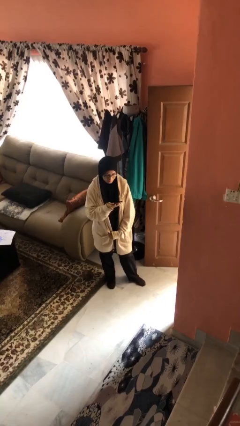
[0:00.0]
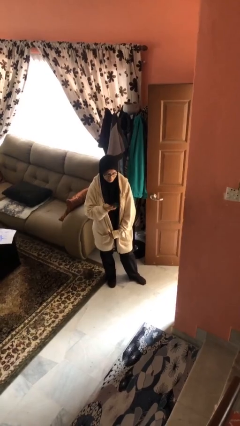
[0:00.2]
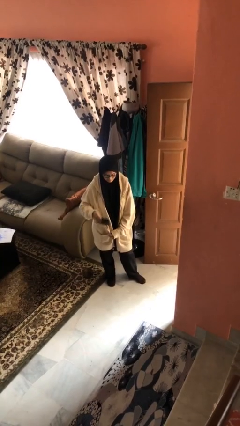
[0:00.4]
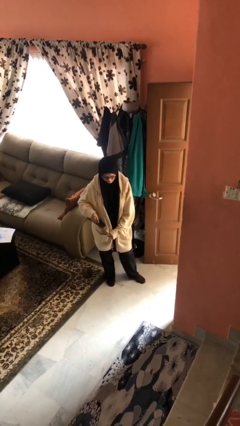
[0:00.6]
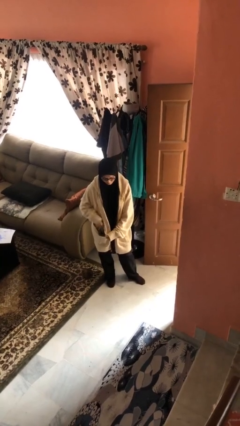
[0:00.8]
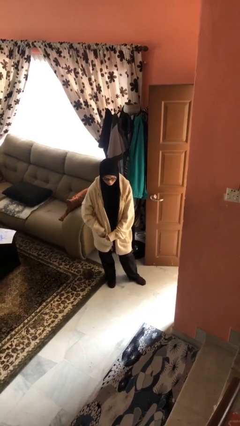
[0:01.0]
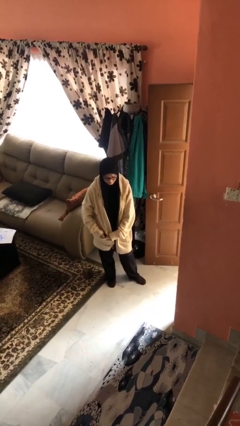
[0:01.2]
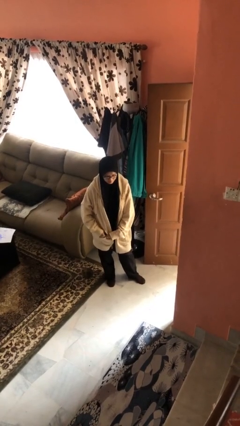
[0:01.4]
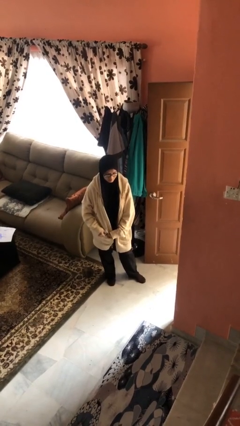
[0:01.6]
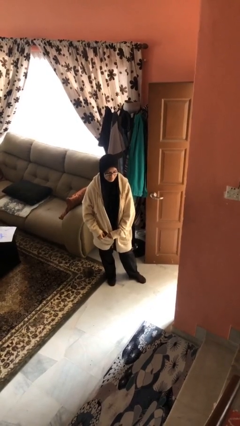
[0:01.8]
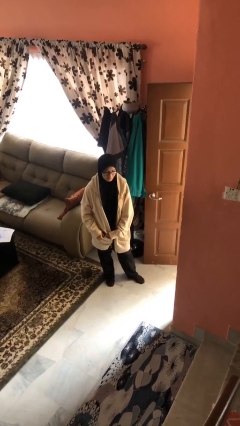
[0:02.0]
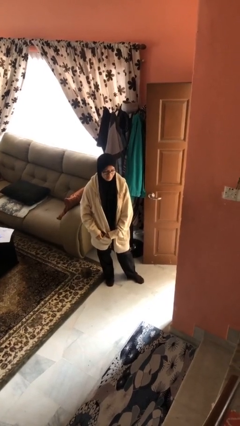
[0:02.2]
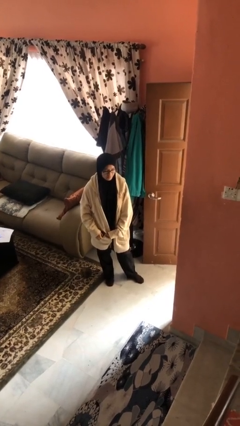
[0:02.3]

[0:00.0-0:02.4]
person puts phone into pocket

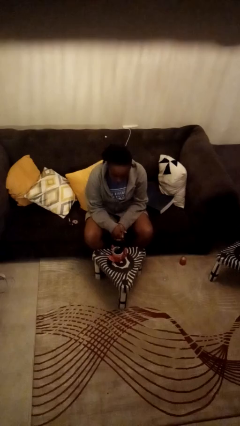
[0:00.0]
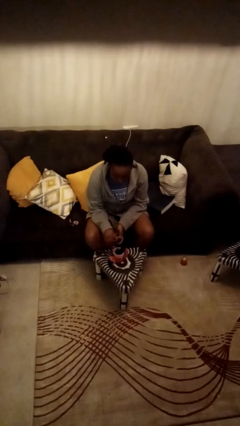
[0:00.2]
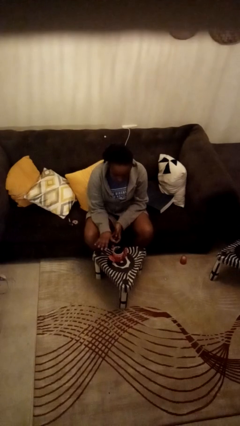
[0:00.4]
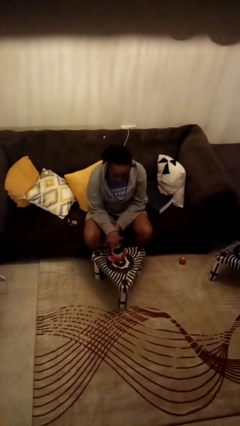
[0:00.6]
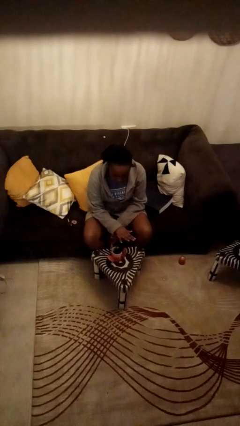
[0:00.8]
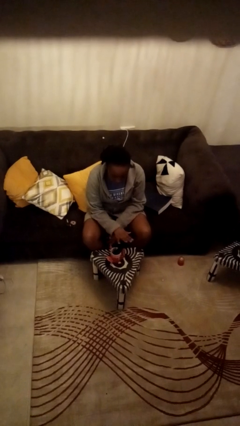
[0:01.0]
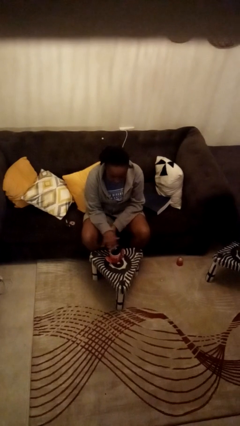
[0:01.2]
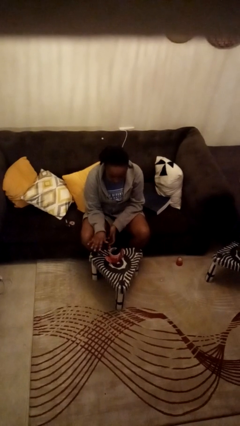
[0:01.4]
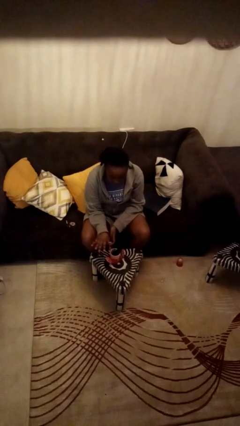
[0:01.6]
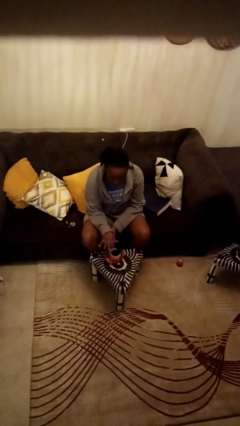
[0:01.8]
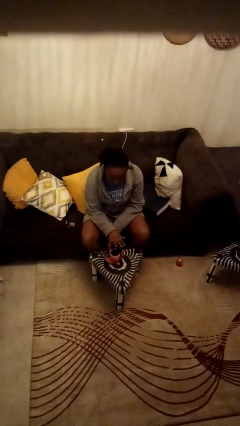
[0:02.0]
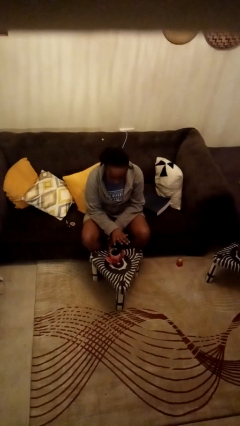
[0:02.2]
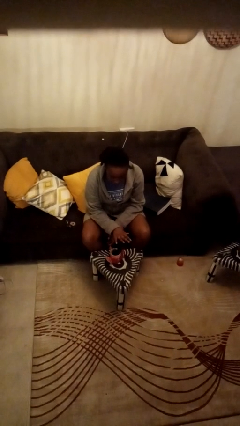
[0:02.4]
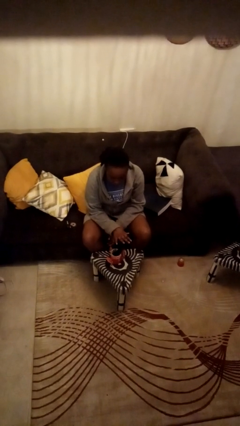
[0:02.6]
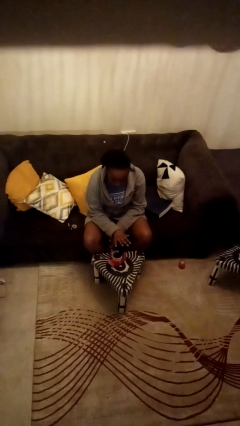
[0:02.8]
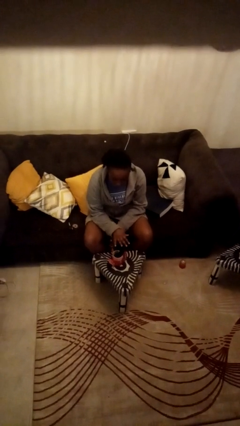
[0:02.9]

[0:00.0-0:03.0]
person waves hand over object

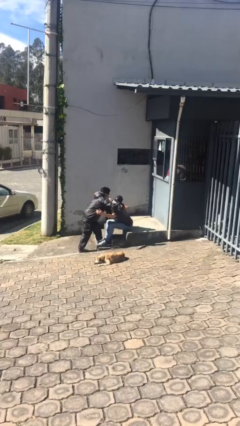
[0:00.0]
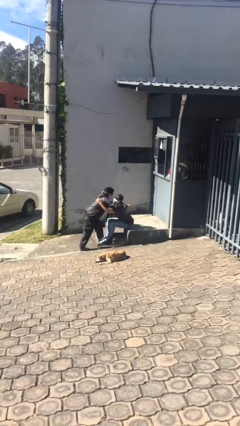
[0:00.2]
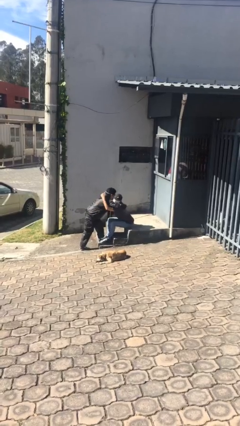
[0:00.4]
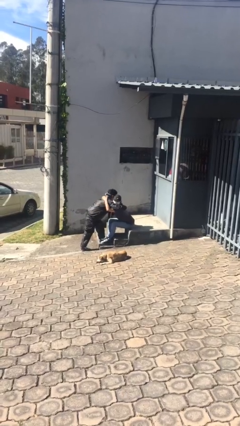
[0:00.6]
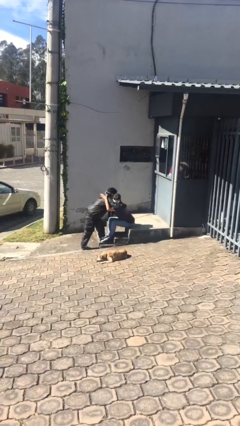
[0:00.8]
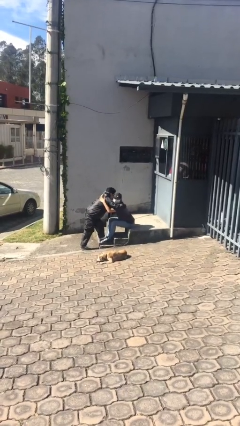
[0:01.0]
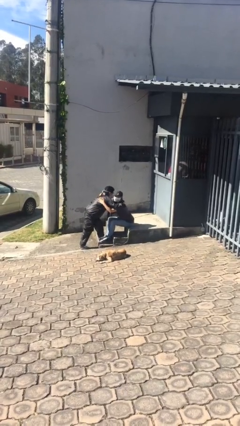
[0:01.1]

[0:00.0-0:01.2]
person embraces person

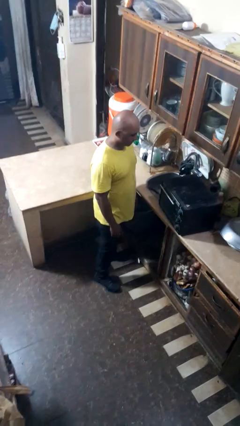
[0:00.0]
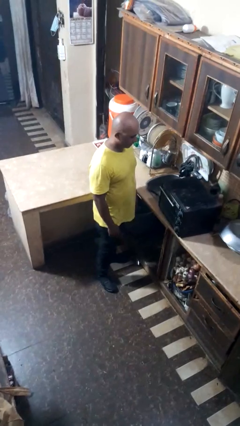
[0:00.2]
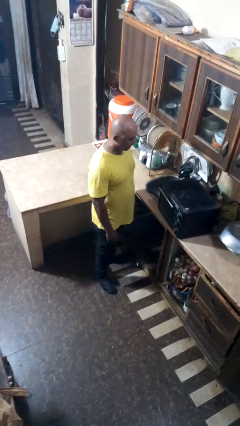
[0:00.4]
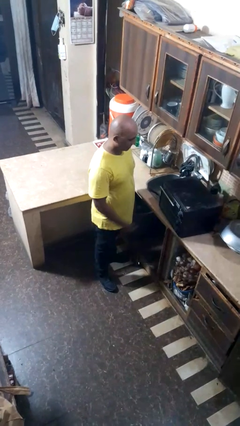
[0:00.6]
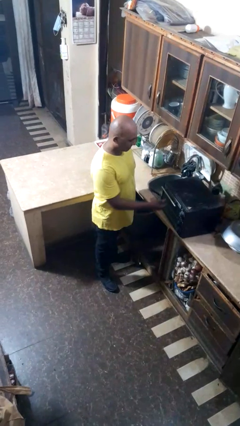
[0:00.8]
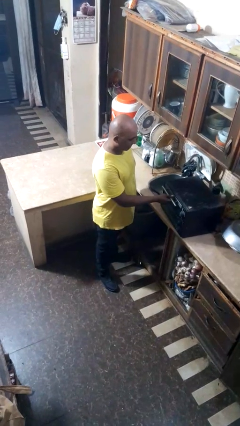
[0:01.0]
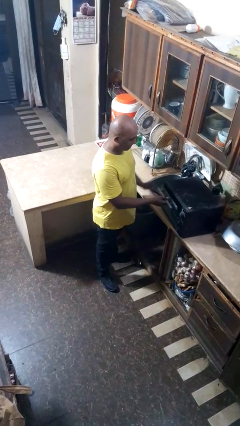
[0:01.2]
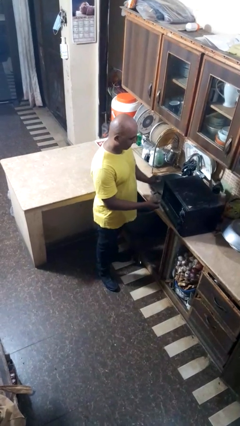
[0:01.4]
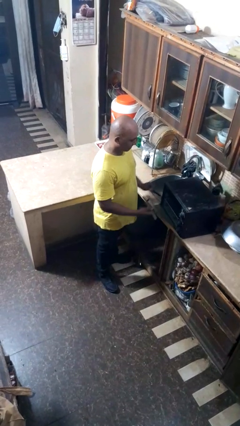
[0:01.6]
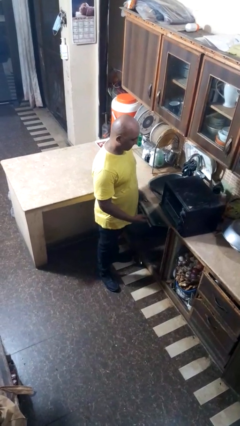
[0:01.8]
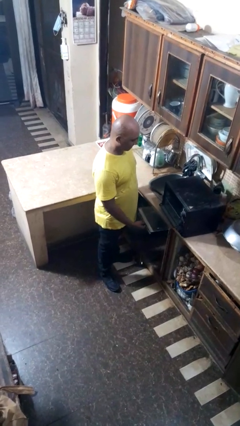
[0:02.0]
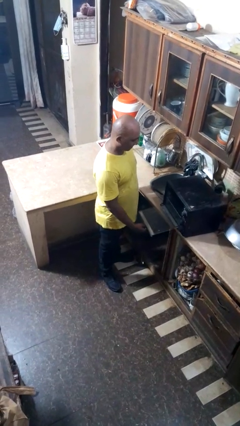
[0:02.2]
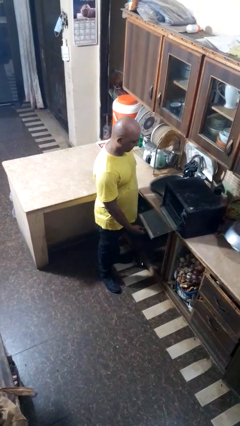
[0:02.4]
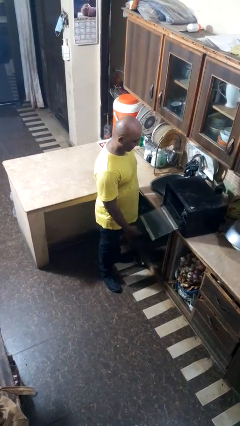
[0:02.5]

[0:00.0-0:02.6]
person opens oven door

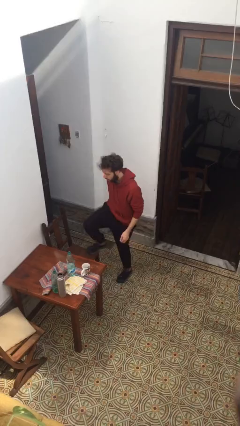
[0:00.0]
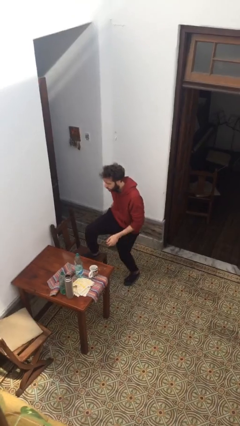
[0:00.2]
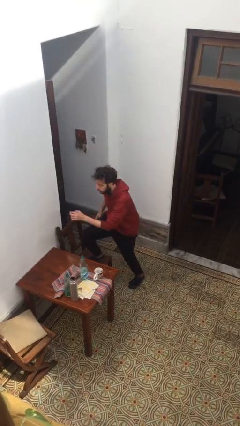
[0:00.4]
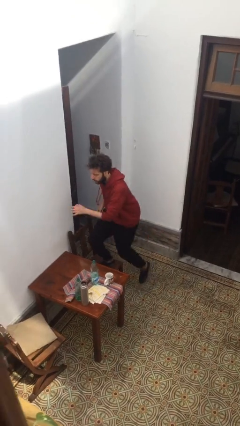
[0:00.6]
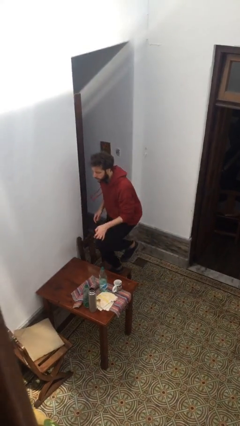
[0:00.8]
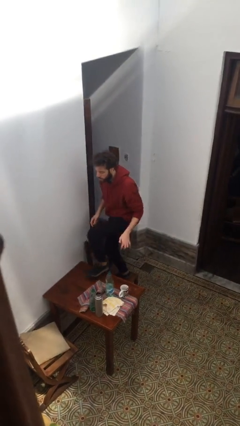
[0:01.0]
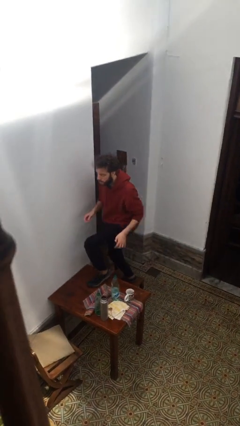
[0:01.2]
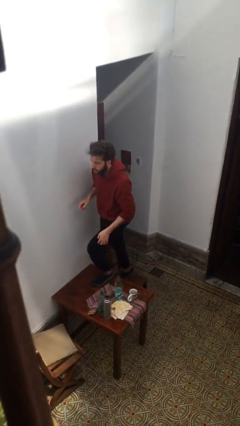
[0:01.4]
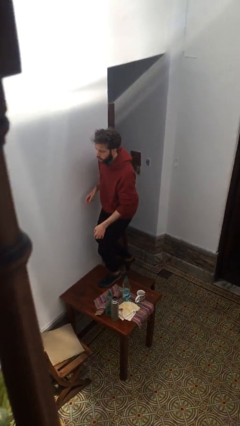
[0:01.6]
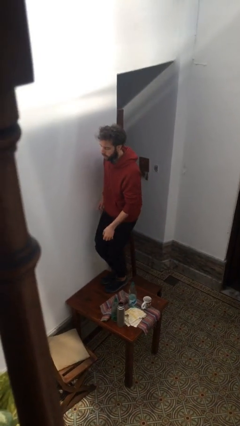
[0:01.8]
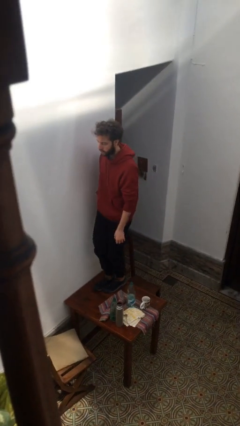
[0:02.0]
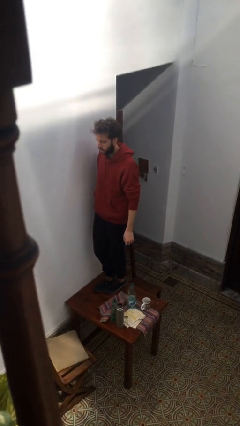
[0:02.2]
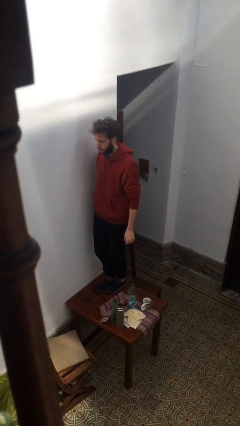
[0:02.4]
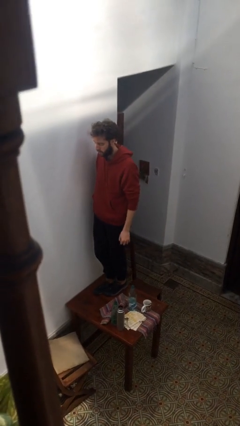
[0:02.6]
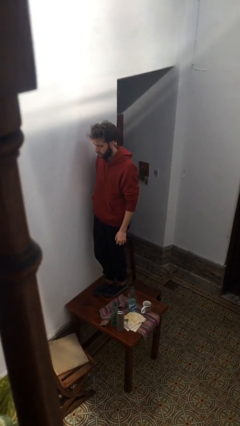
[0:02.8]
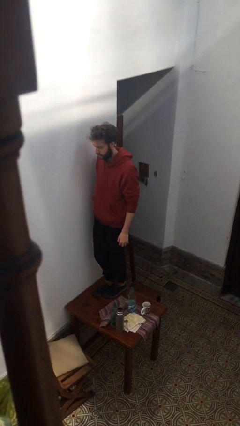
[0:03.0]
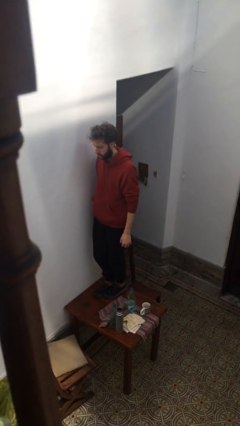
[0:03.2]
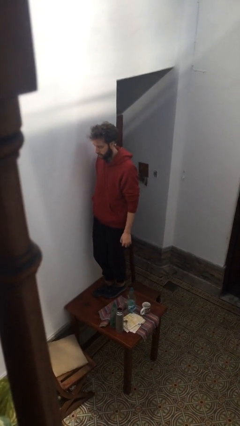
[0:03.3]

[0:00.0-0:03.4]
person climbs on table

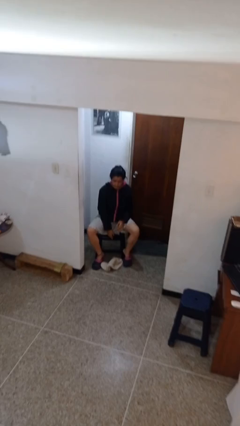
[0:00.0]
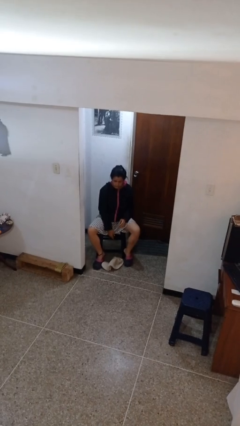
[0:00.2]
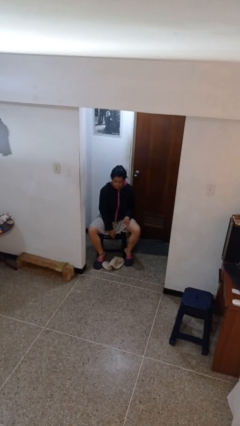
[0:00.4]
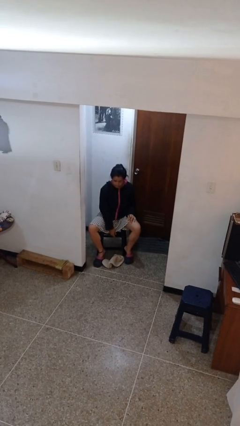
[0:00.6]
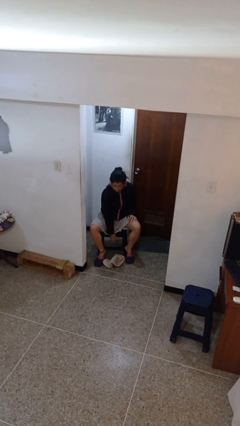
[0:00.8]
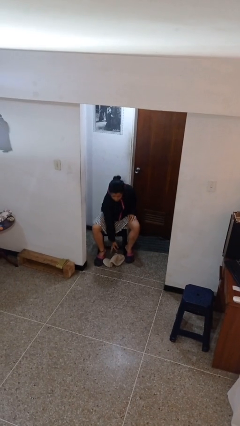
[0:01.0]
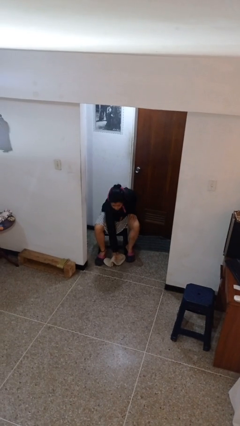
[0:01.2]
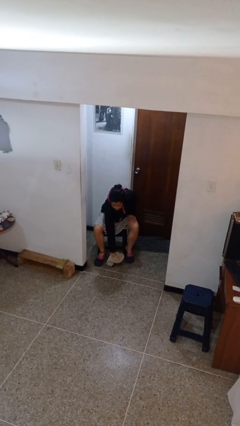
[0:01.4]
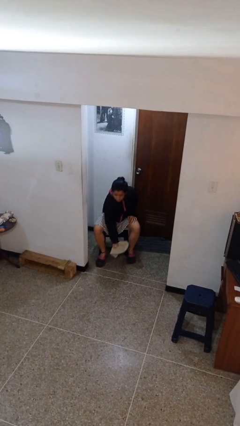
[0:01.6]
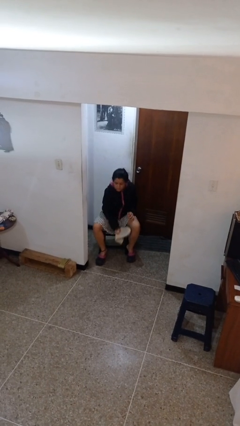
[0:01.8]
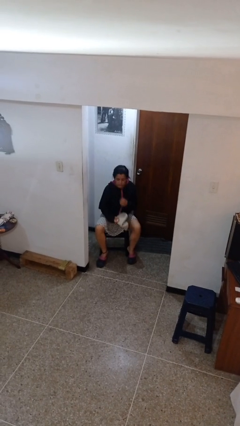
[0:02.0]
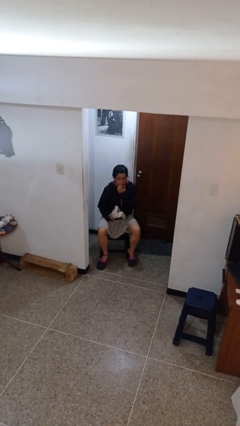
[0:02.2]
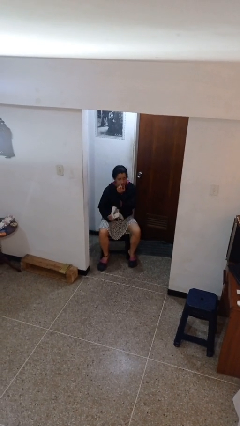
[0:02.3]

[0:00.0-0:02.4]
person picks up object from floor

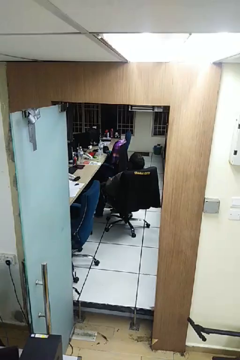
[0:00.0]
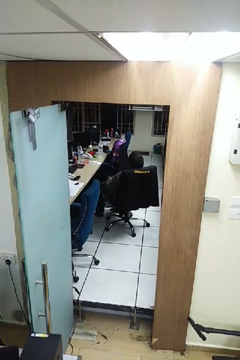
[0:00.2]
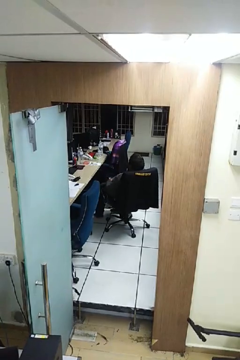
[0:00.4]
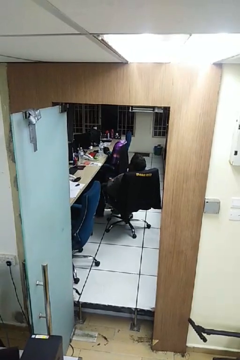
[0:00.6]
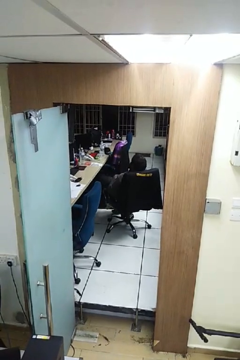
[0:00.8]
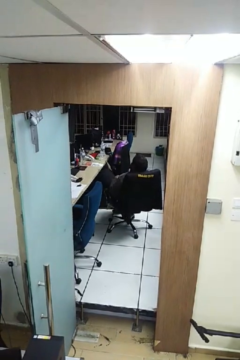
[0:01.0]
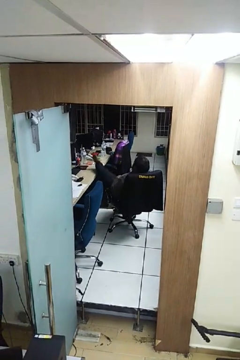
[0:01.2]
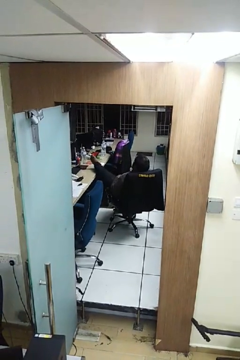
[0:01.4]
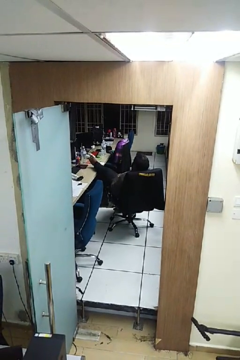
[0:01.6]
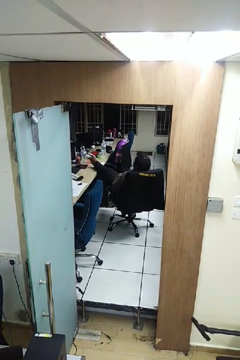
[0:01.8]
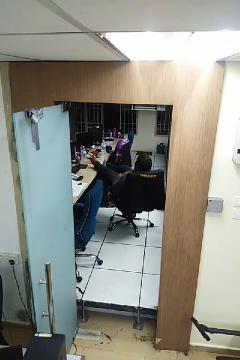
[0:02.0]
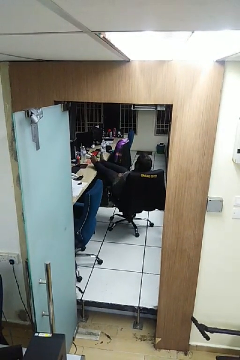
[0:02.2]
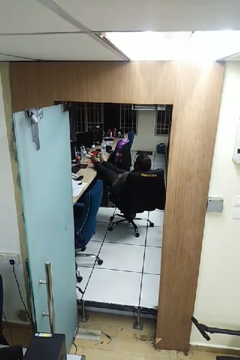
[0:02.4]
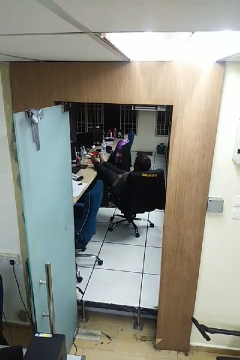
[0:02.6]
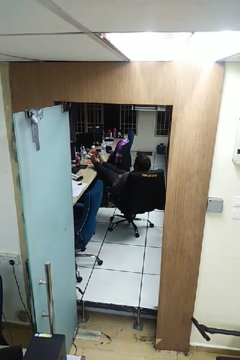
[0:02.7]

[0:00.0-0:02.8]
person puts feet up
